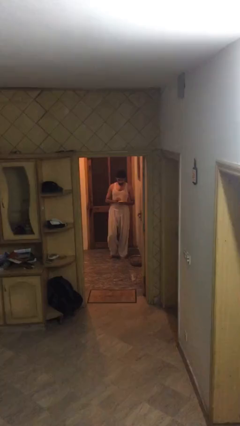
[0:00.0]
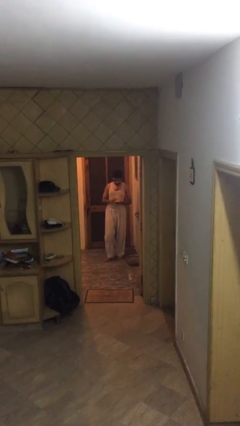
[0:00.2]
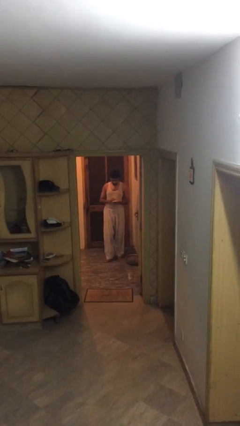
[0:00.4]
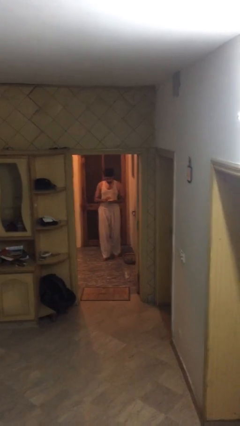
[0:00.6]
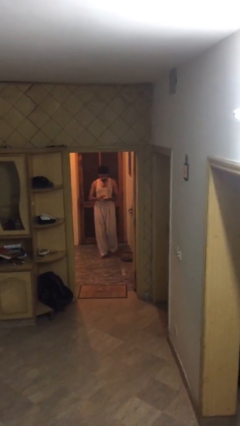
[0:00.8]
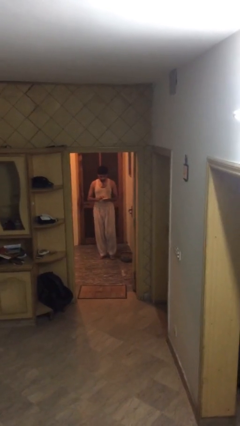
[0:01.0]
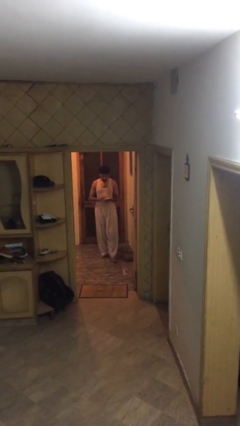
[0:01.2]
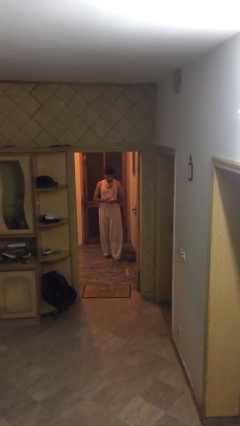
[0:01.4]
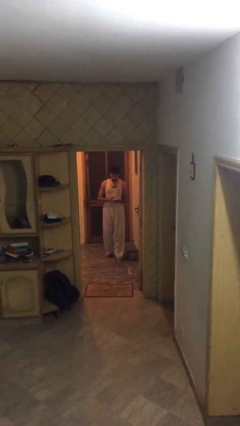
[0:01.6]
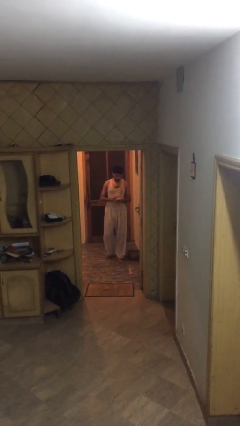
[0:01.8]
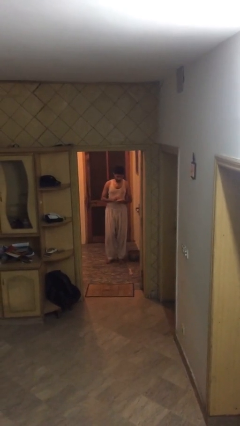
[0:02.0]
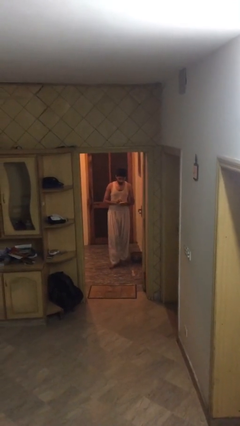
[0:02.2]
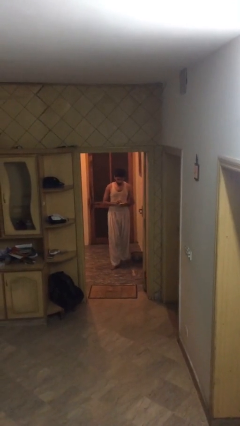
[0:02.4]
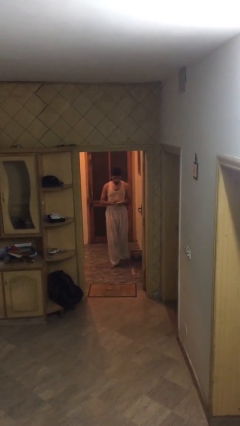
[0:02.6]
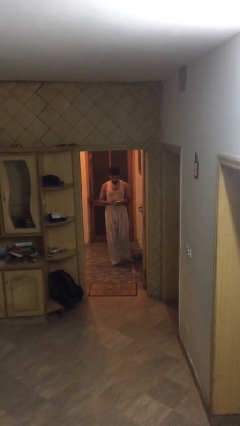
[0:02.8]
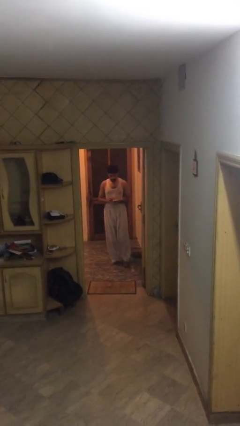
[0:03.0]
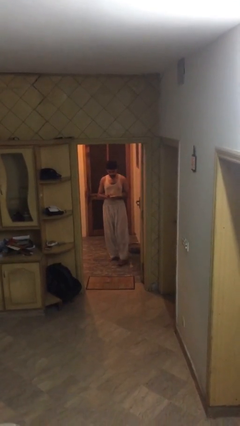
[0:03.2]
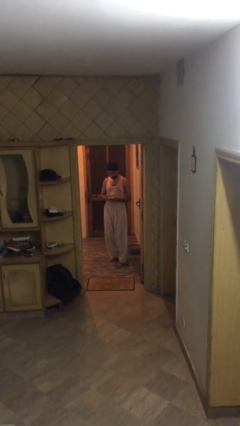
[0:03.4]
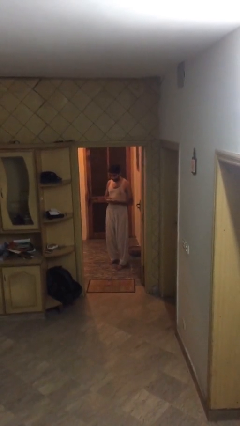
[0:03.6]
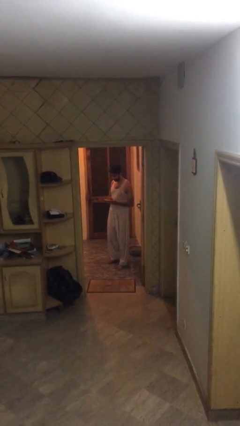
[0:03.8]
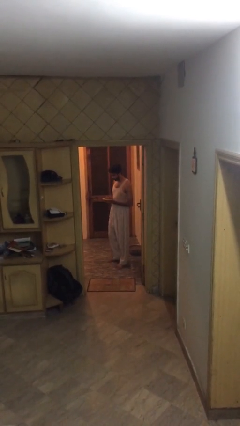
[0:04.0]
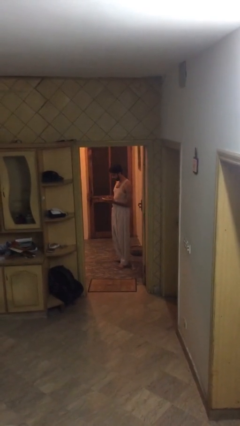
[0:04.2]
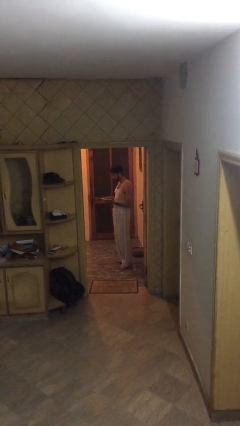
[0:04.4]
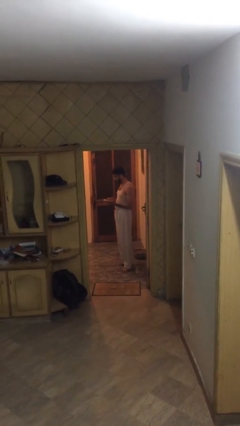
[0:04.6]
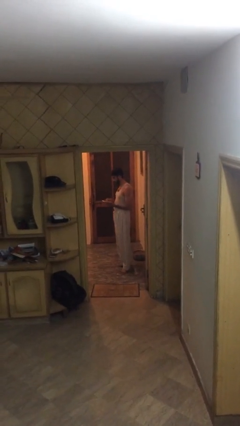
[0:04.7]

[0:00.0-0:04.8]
person texts on phone

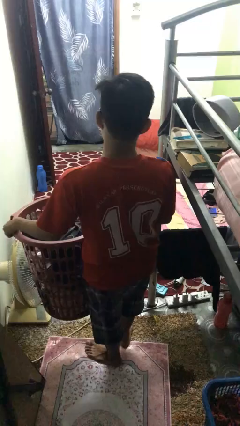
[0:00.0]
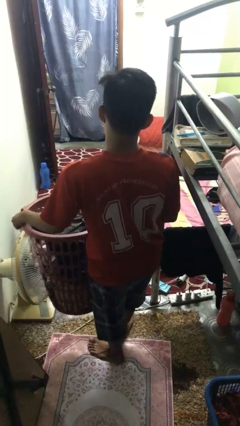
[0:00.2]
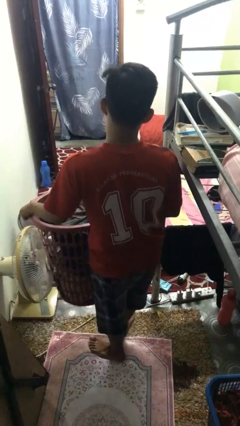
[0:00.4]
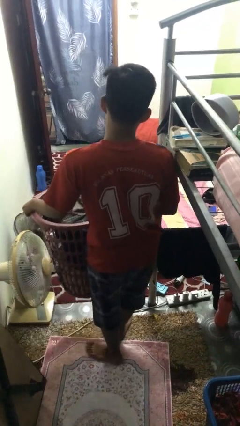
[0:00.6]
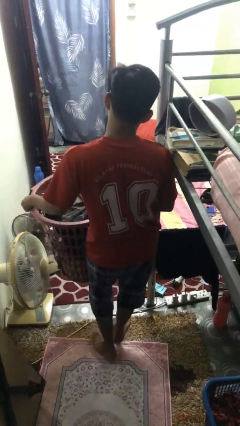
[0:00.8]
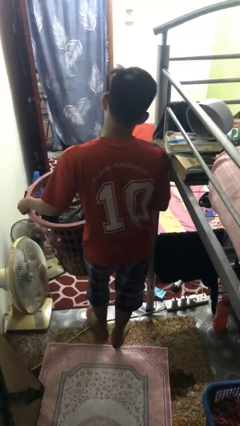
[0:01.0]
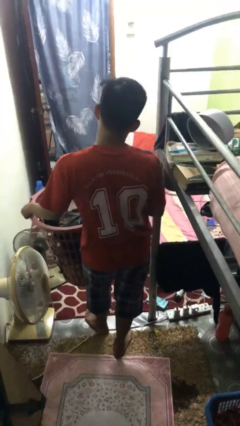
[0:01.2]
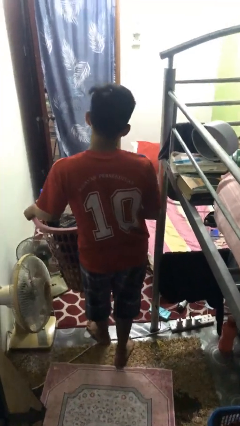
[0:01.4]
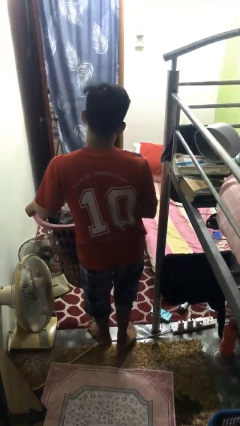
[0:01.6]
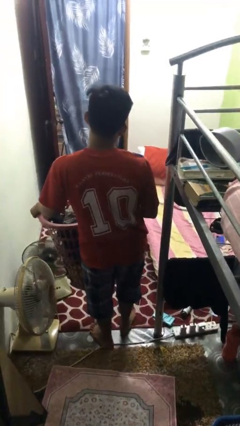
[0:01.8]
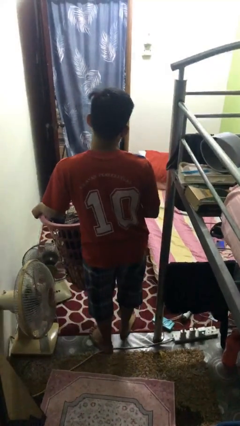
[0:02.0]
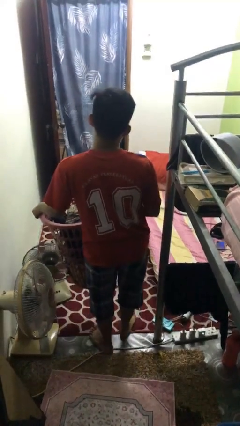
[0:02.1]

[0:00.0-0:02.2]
person carries laundry basket

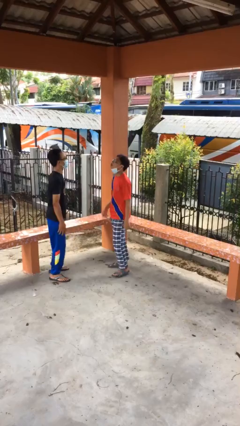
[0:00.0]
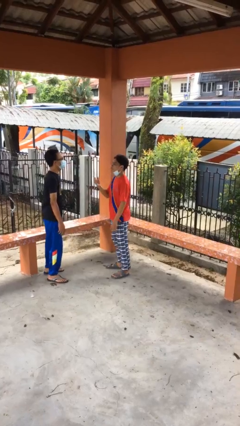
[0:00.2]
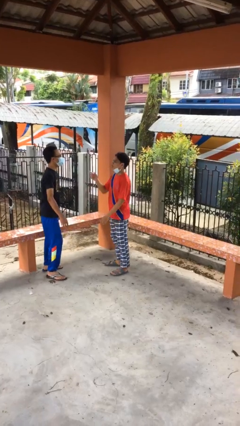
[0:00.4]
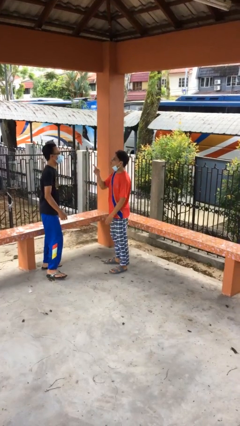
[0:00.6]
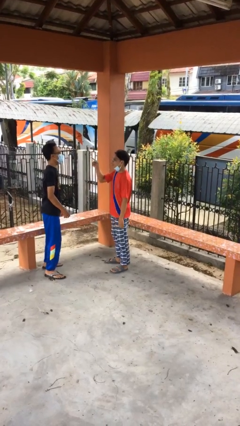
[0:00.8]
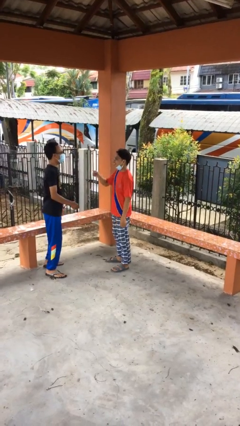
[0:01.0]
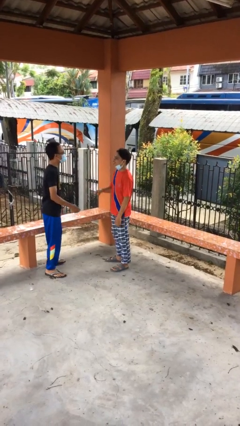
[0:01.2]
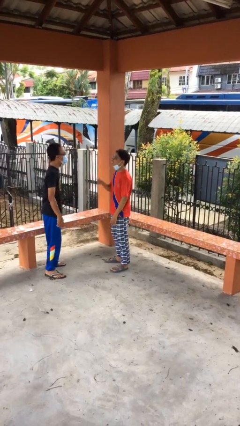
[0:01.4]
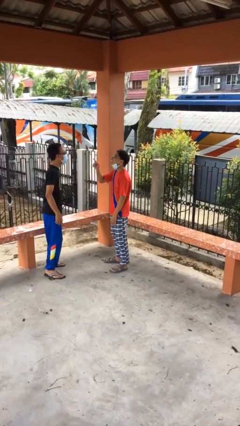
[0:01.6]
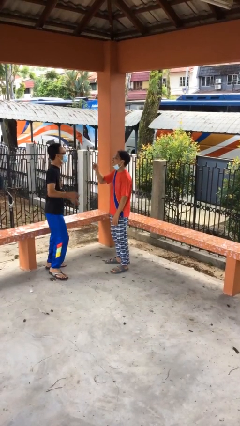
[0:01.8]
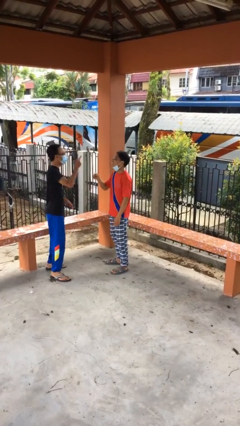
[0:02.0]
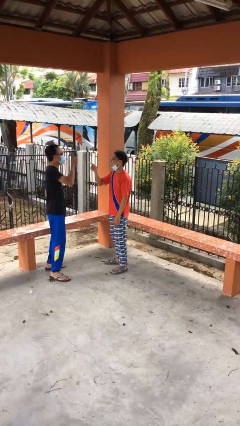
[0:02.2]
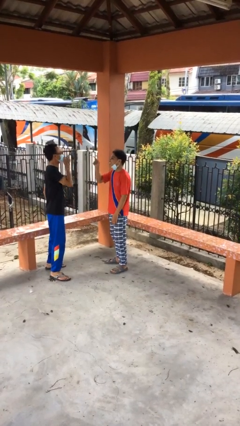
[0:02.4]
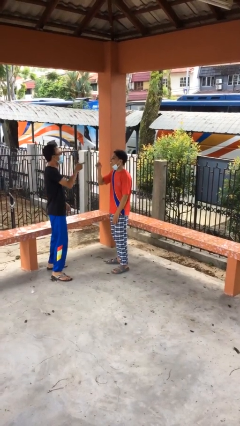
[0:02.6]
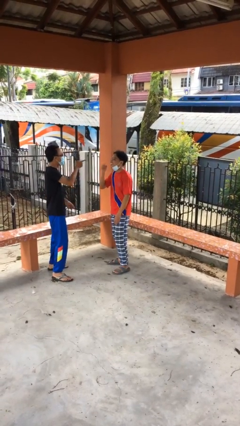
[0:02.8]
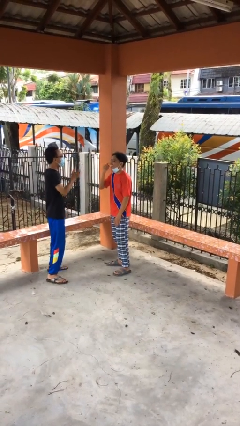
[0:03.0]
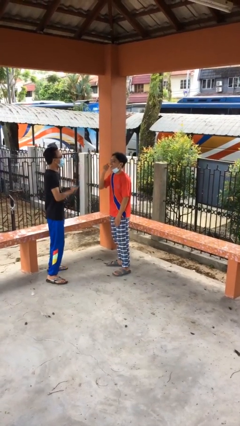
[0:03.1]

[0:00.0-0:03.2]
person talks to person

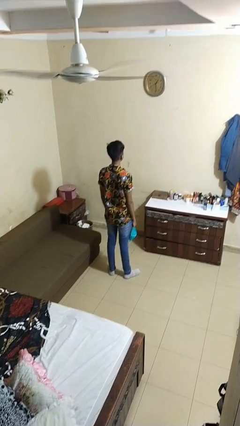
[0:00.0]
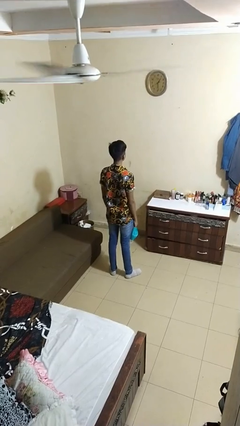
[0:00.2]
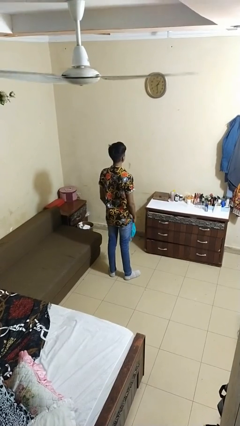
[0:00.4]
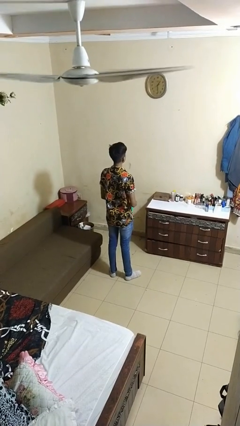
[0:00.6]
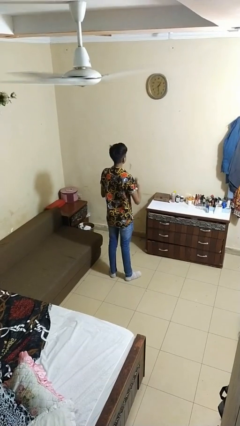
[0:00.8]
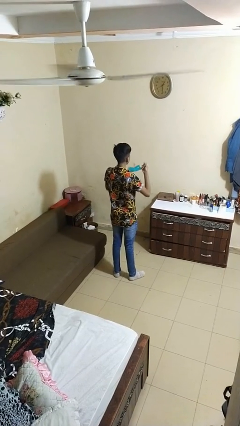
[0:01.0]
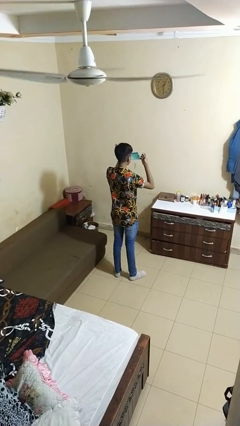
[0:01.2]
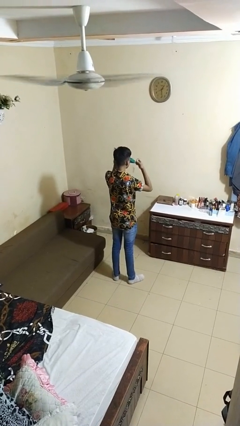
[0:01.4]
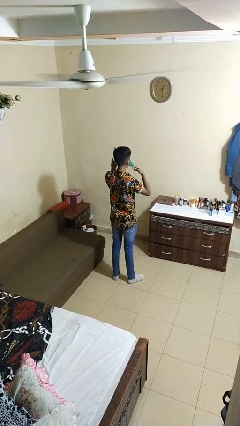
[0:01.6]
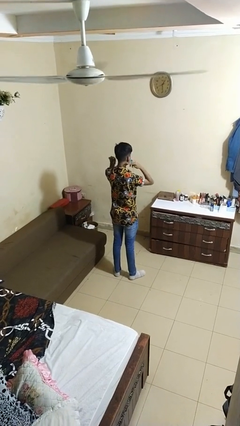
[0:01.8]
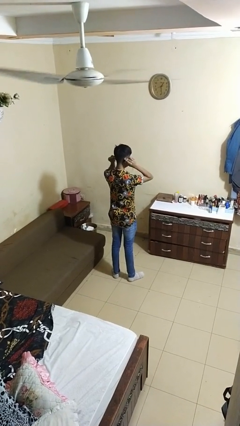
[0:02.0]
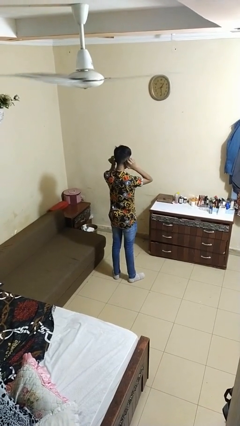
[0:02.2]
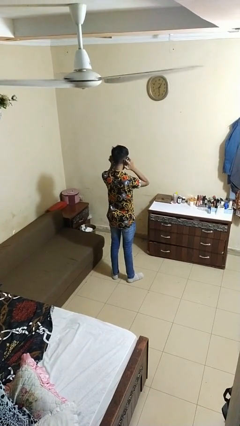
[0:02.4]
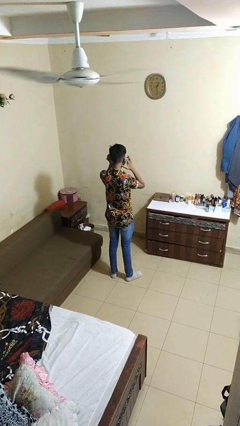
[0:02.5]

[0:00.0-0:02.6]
person puts on facemask

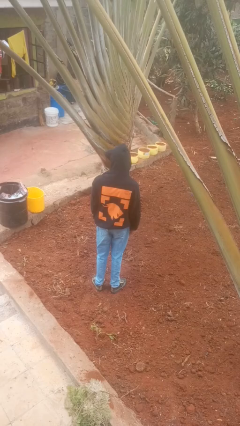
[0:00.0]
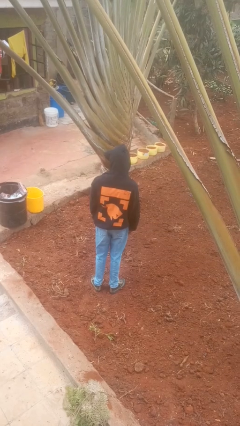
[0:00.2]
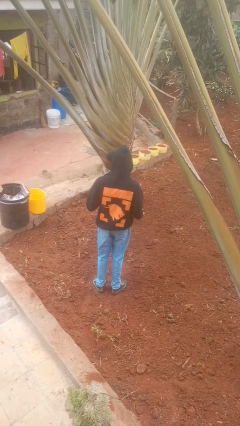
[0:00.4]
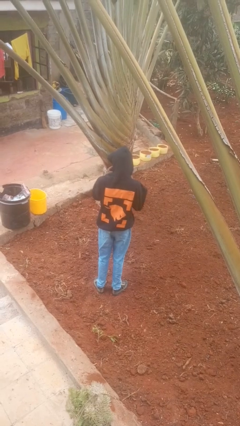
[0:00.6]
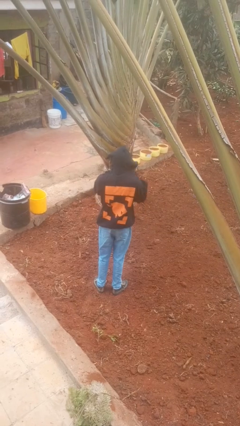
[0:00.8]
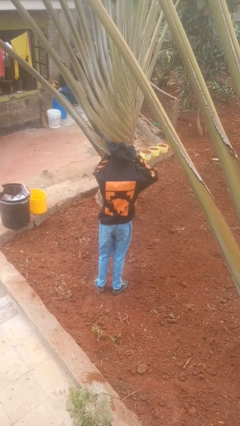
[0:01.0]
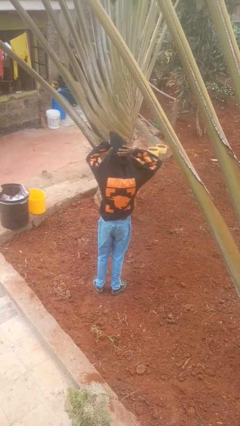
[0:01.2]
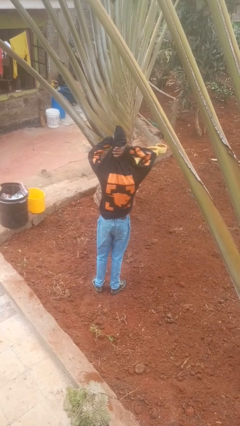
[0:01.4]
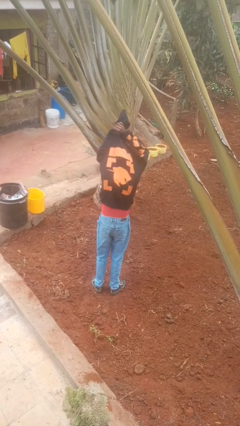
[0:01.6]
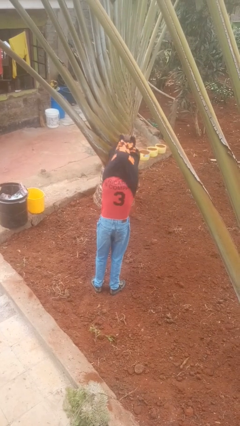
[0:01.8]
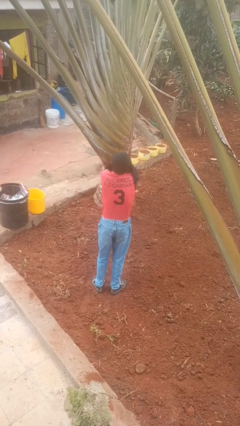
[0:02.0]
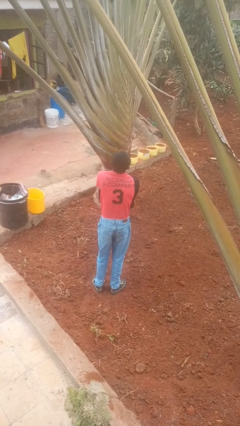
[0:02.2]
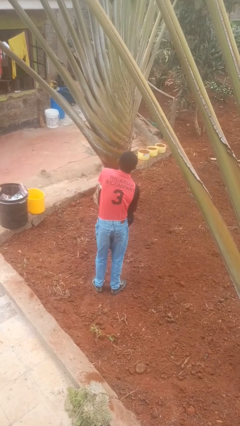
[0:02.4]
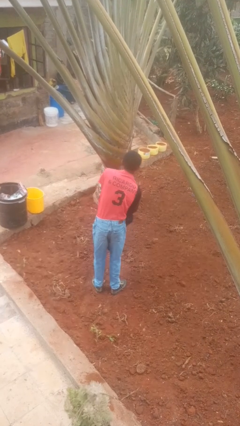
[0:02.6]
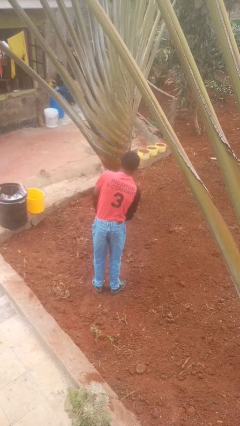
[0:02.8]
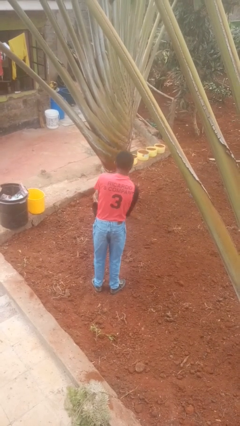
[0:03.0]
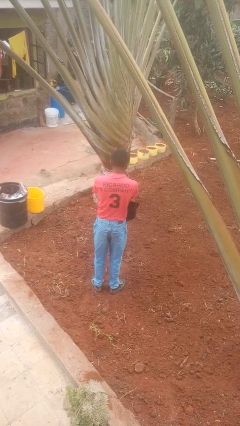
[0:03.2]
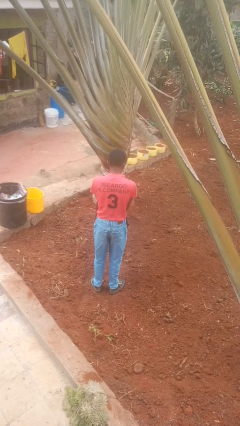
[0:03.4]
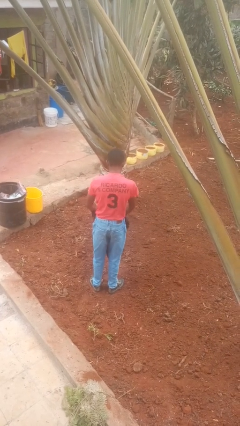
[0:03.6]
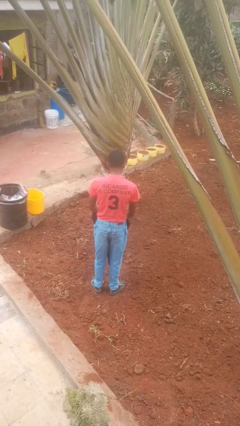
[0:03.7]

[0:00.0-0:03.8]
person takes off hoodie

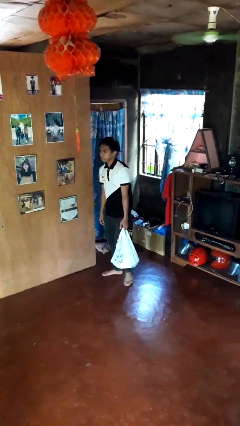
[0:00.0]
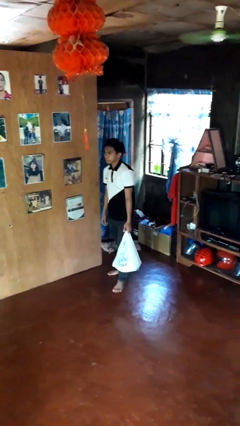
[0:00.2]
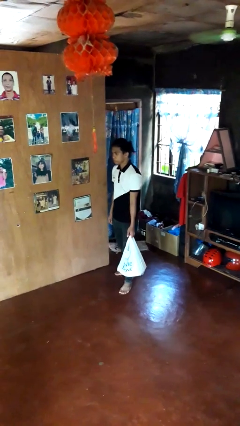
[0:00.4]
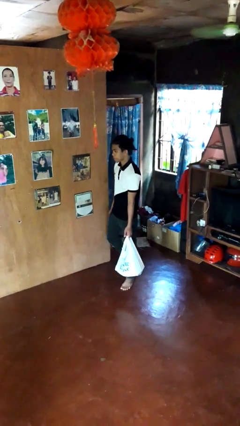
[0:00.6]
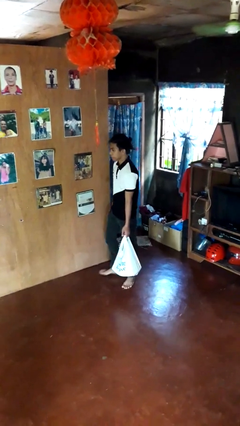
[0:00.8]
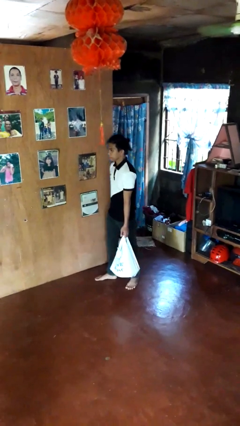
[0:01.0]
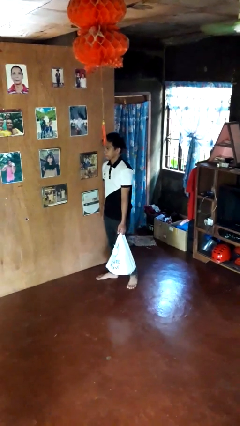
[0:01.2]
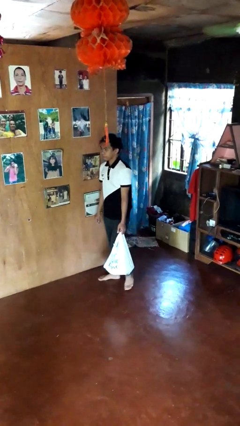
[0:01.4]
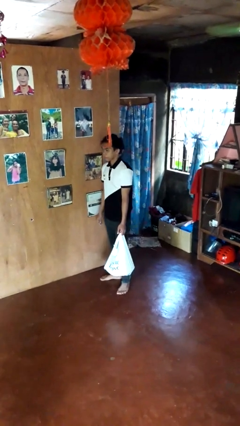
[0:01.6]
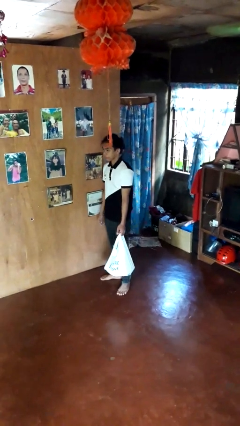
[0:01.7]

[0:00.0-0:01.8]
person carries groceries
